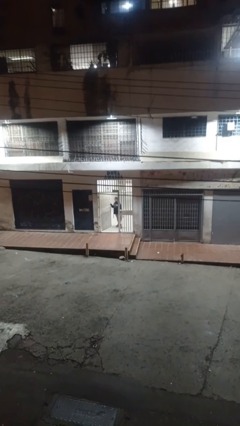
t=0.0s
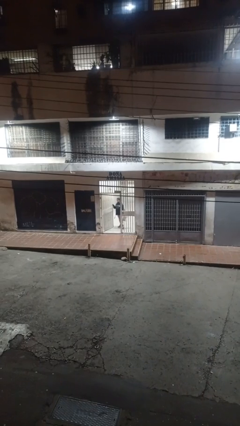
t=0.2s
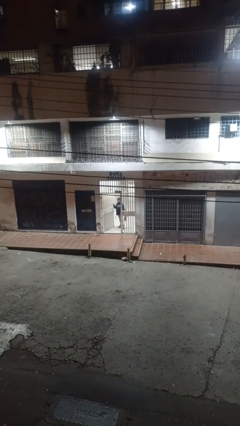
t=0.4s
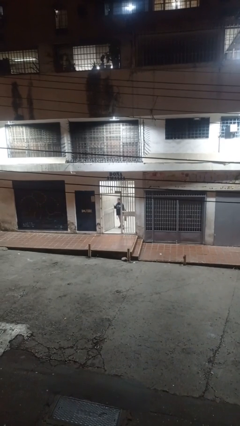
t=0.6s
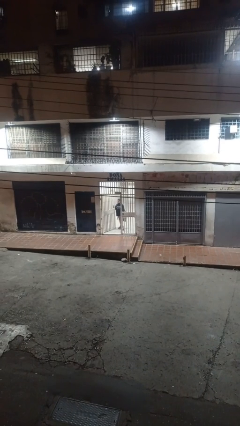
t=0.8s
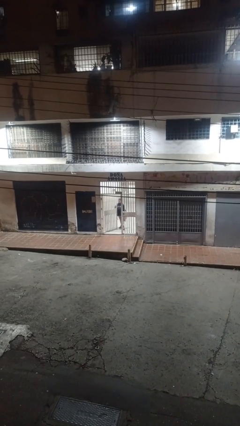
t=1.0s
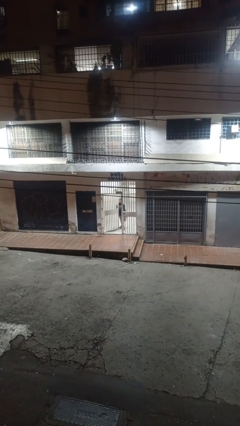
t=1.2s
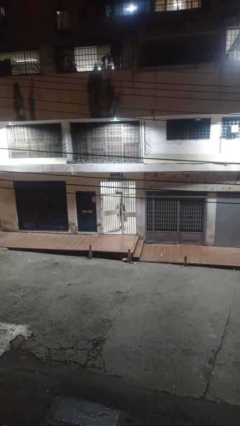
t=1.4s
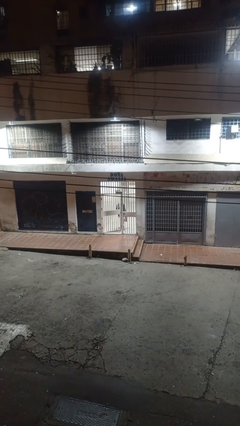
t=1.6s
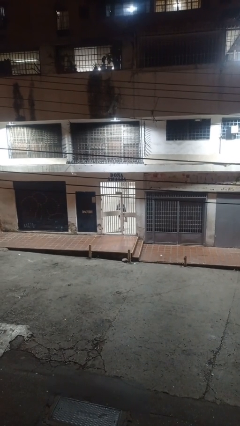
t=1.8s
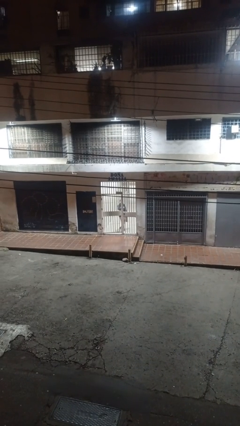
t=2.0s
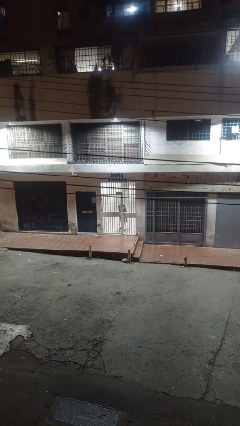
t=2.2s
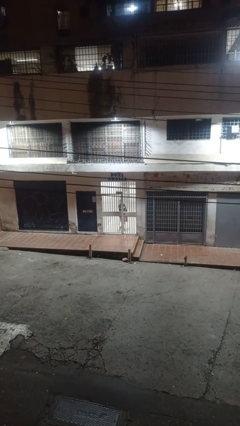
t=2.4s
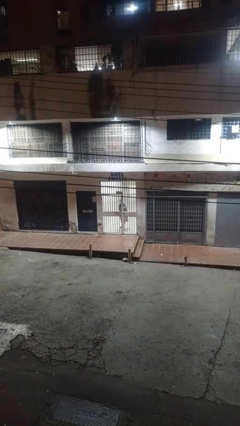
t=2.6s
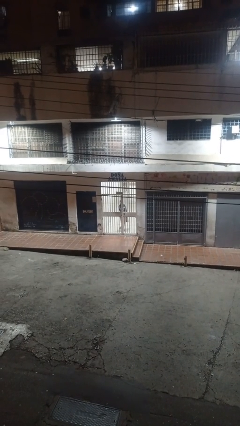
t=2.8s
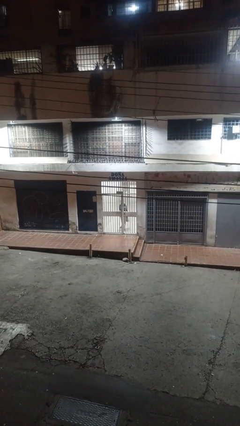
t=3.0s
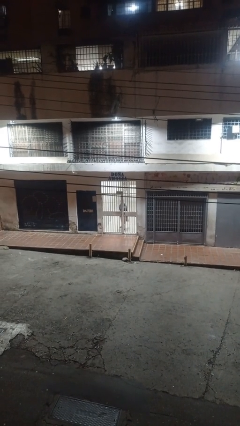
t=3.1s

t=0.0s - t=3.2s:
person closes gate

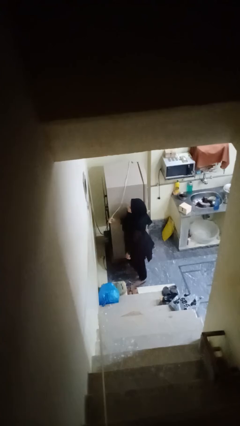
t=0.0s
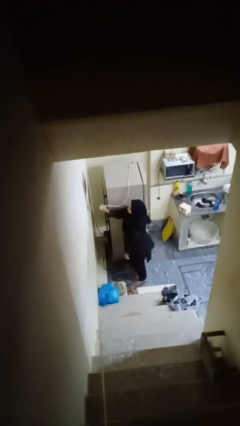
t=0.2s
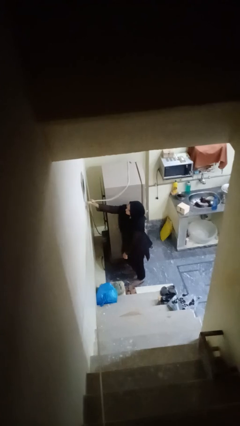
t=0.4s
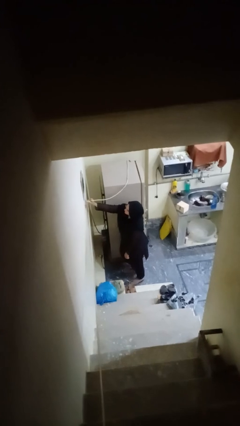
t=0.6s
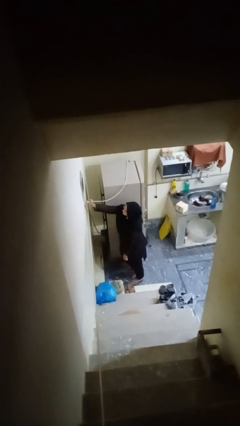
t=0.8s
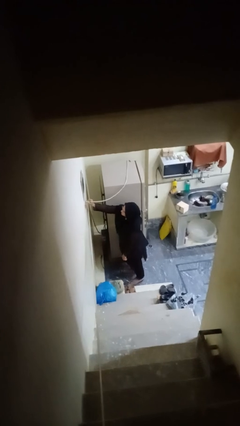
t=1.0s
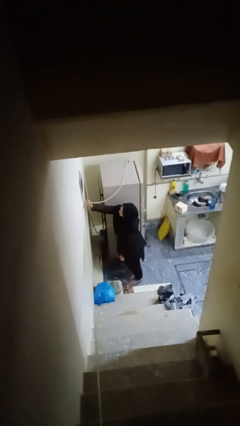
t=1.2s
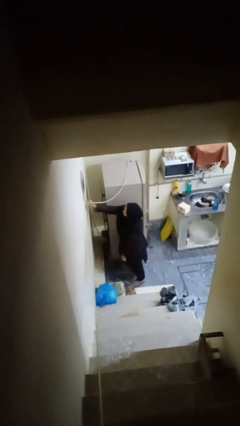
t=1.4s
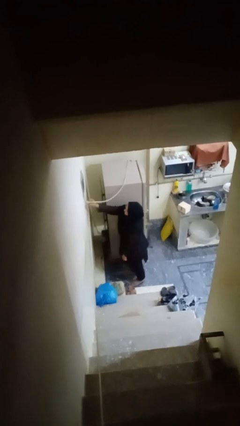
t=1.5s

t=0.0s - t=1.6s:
person plugs into electrical socket

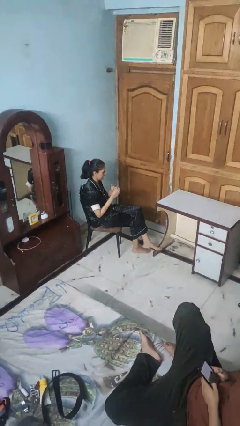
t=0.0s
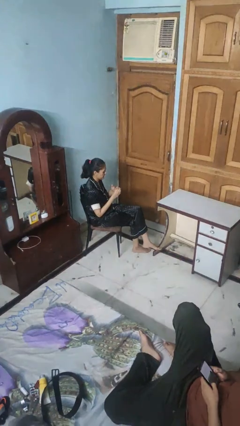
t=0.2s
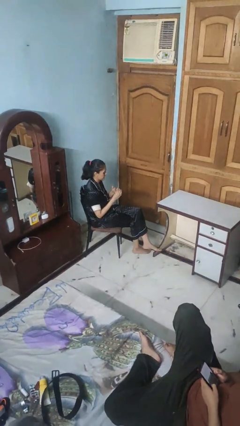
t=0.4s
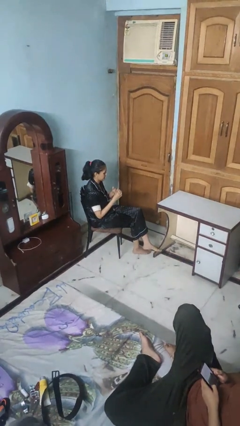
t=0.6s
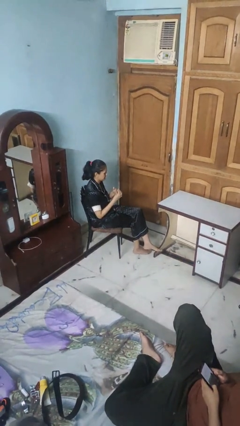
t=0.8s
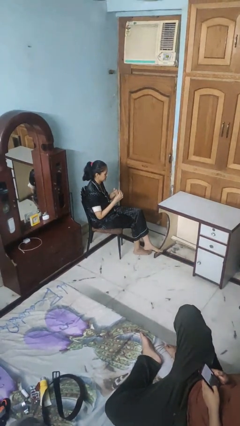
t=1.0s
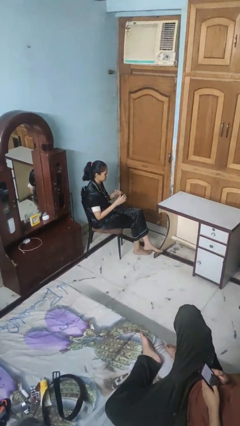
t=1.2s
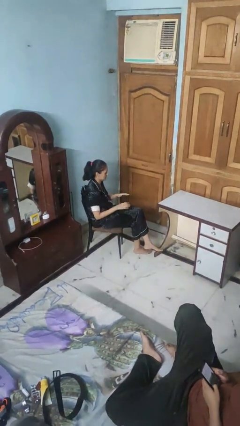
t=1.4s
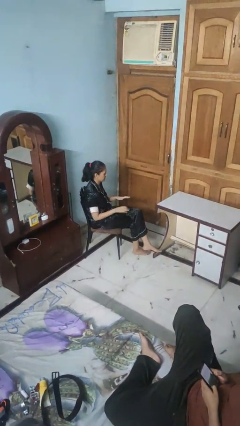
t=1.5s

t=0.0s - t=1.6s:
person puts on ring

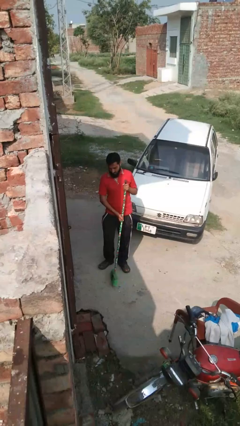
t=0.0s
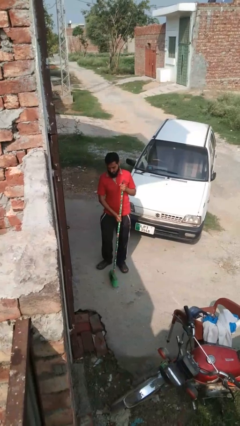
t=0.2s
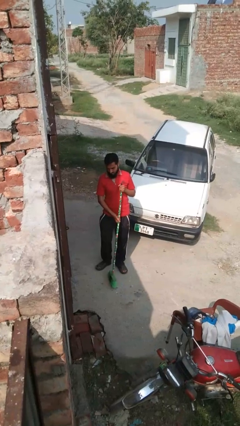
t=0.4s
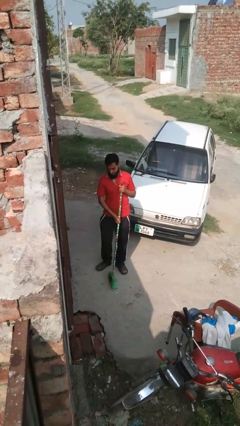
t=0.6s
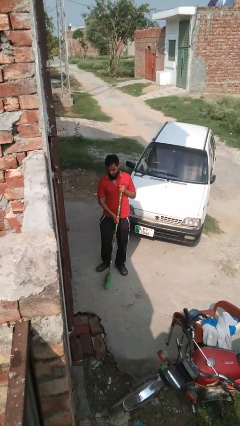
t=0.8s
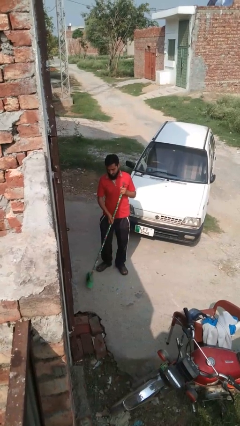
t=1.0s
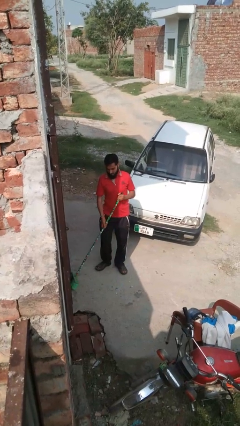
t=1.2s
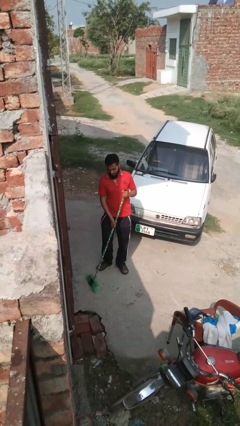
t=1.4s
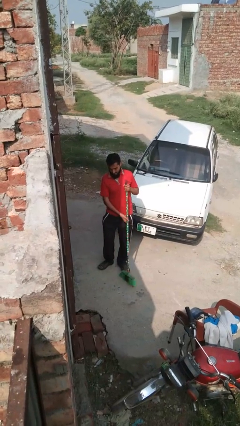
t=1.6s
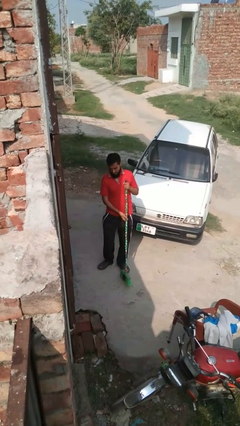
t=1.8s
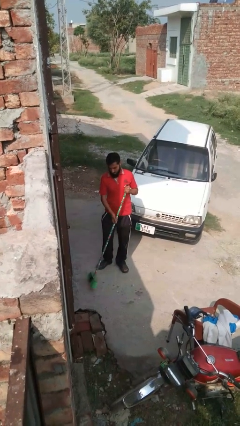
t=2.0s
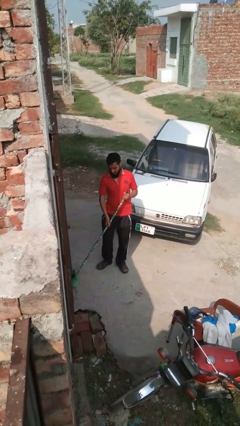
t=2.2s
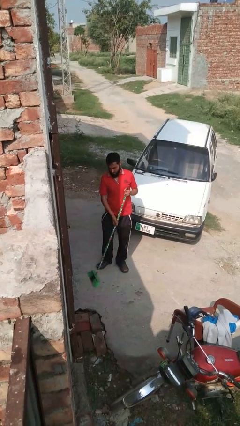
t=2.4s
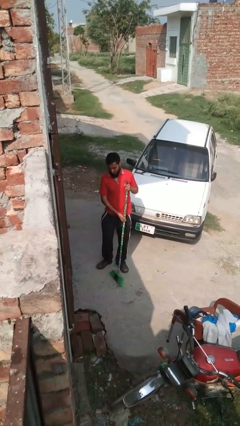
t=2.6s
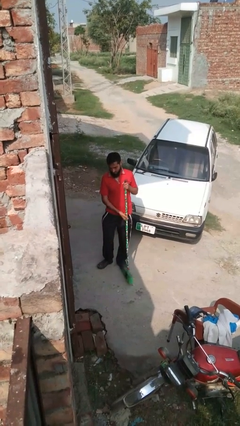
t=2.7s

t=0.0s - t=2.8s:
person sweeps floor

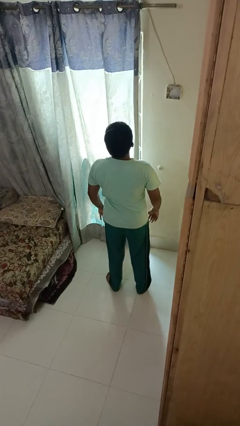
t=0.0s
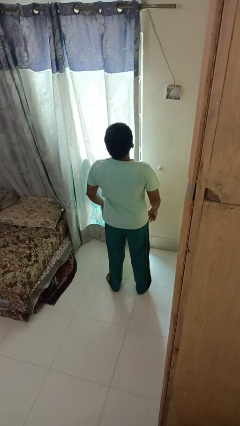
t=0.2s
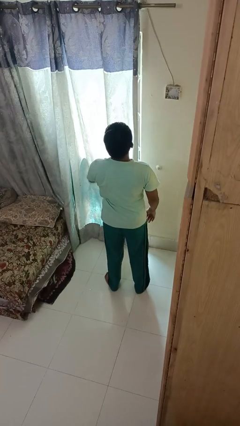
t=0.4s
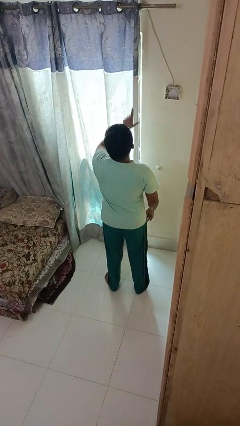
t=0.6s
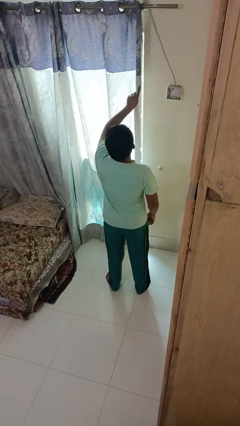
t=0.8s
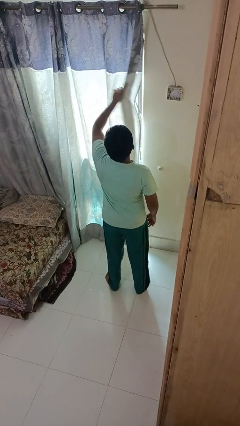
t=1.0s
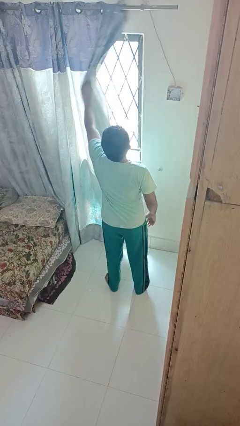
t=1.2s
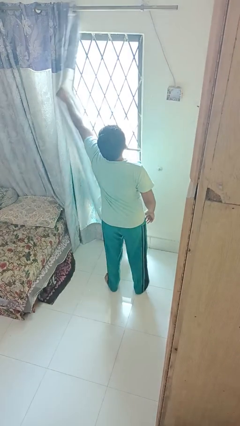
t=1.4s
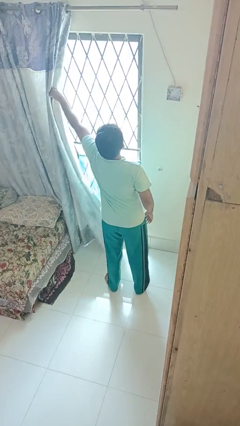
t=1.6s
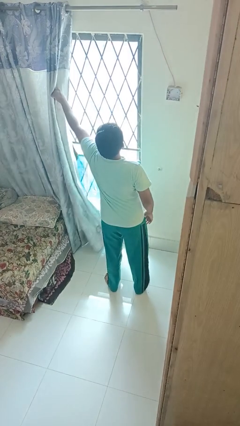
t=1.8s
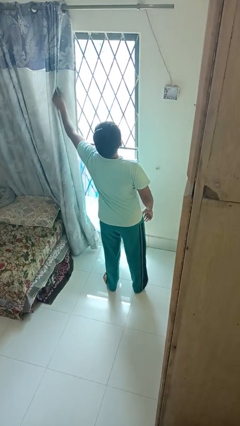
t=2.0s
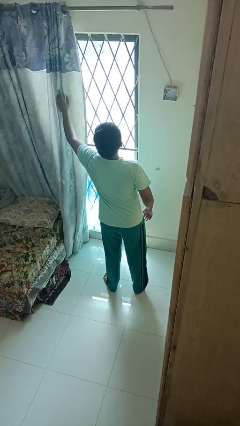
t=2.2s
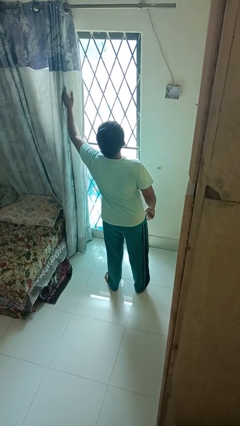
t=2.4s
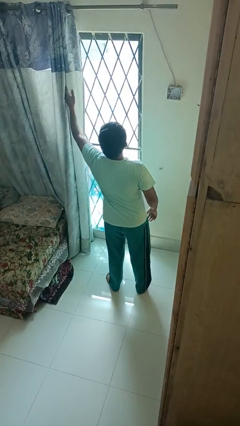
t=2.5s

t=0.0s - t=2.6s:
person opens curtains

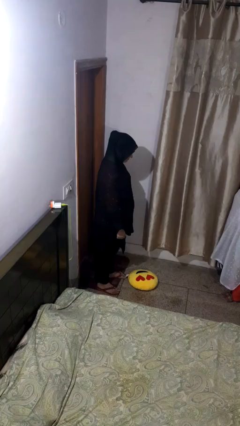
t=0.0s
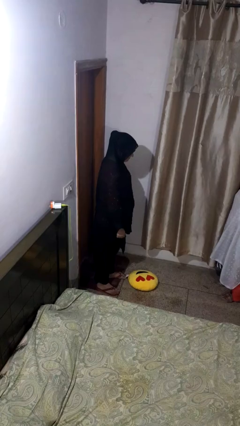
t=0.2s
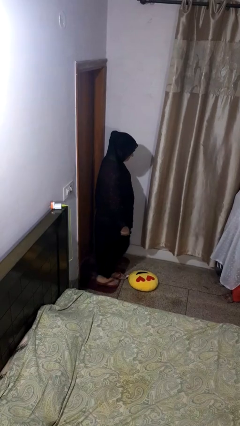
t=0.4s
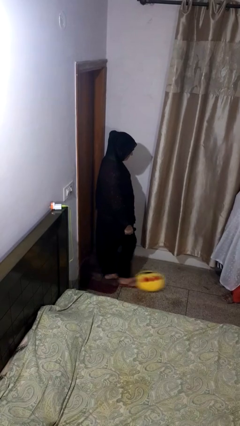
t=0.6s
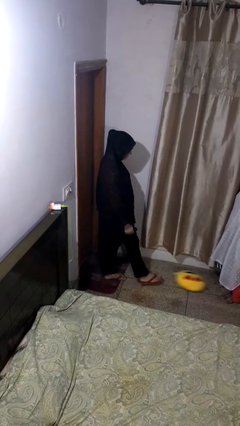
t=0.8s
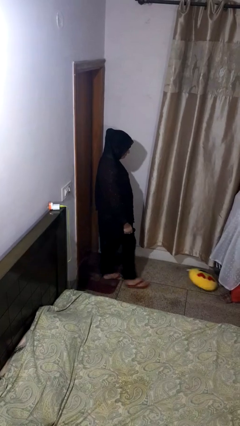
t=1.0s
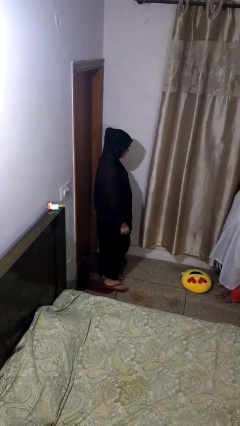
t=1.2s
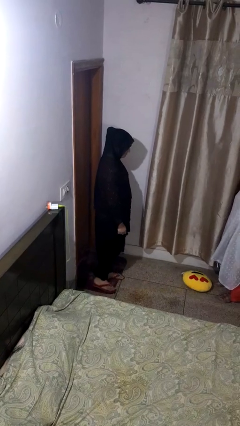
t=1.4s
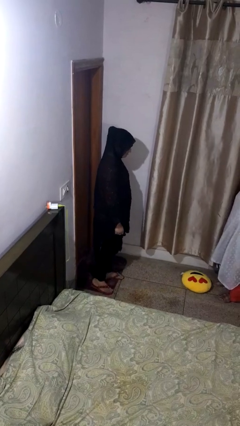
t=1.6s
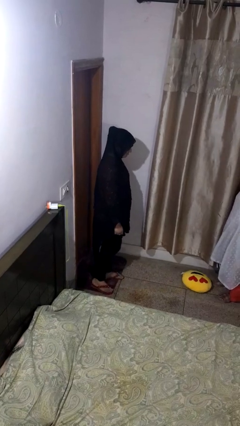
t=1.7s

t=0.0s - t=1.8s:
person kicks object to person

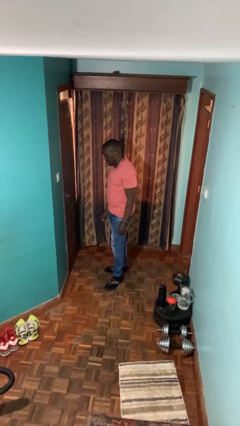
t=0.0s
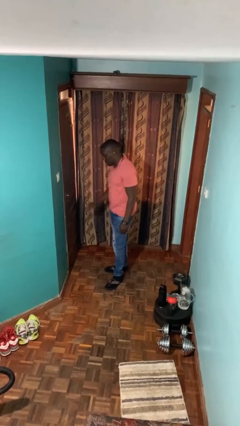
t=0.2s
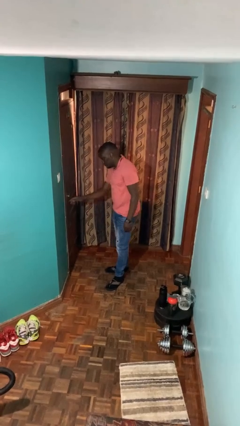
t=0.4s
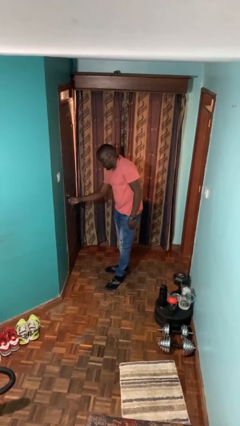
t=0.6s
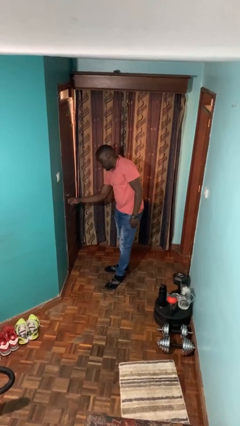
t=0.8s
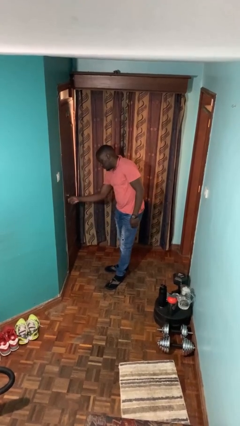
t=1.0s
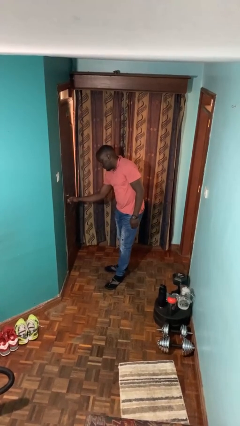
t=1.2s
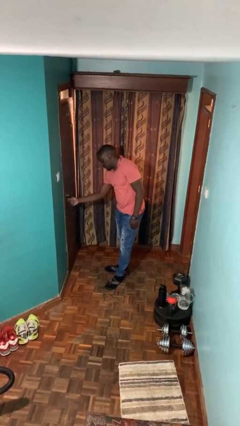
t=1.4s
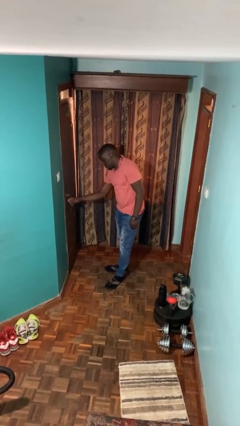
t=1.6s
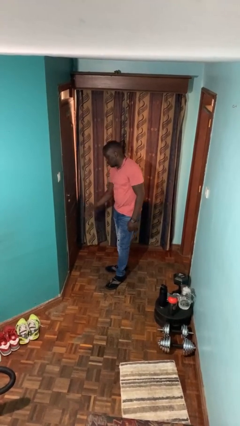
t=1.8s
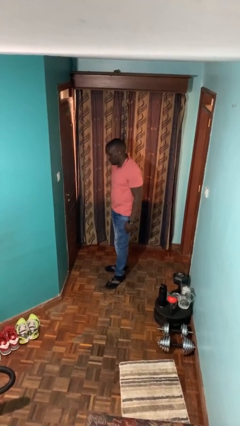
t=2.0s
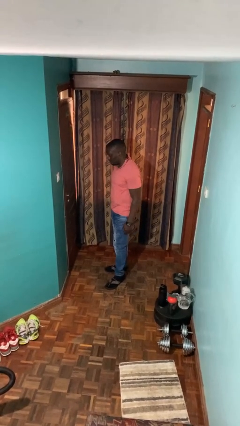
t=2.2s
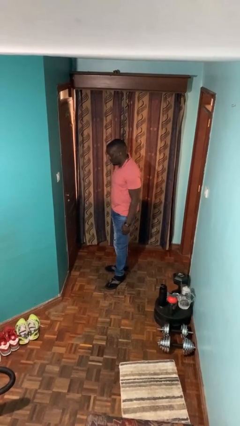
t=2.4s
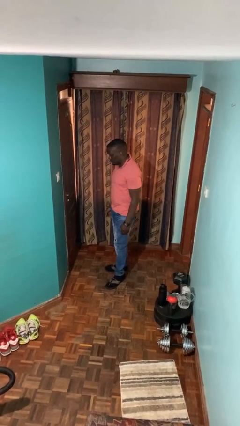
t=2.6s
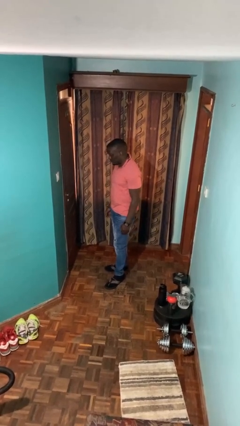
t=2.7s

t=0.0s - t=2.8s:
person unlocks door with keys

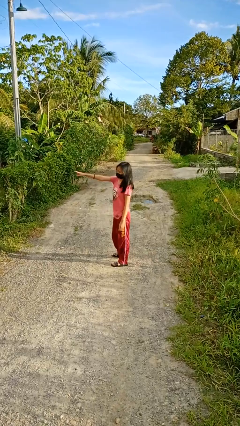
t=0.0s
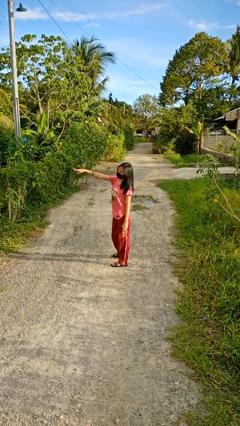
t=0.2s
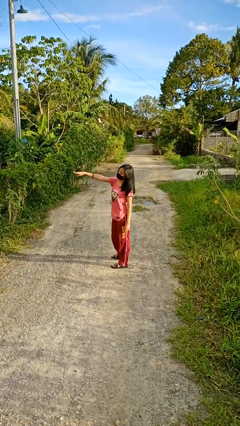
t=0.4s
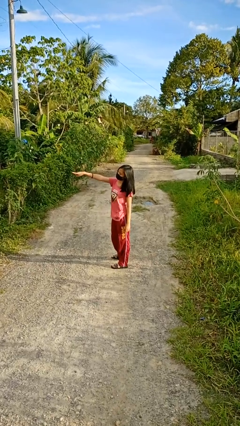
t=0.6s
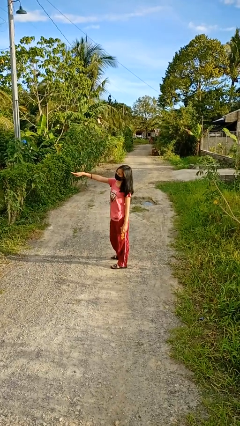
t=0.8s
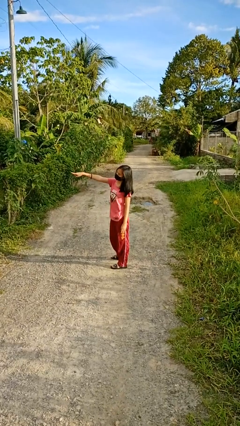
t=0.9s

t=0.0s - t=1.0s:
person points at person
